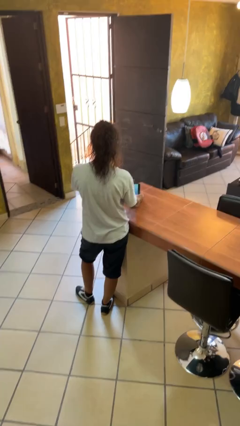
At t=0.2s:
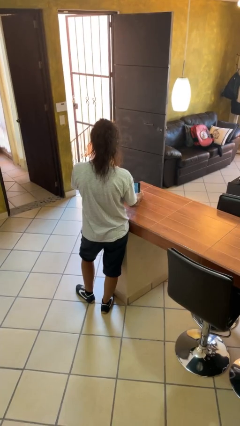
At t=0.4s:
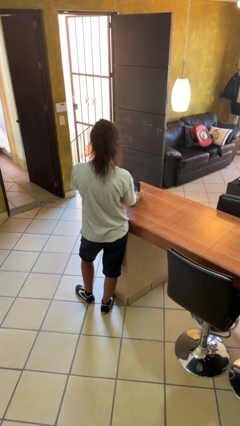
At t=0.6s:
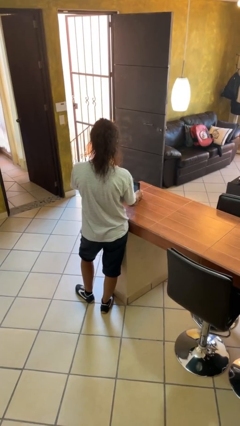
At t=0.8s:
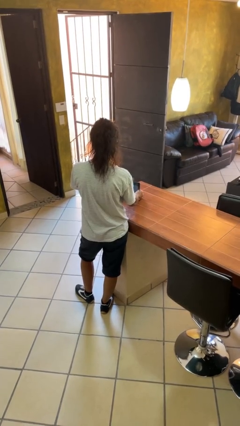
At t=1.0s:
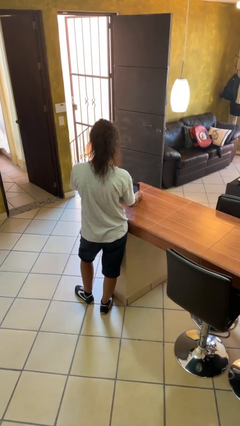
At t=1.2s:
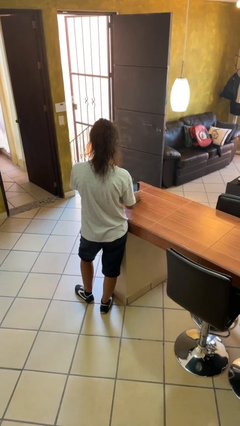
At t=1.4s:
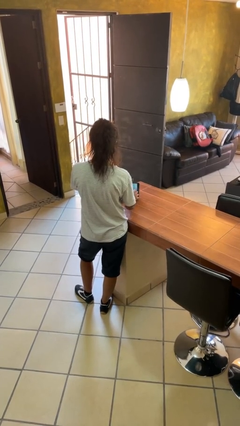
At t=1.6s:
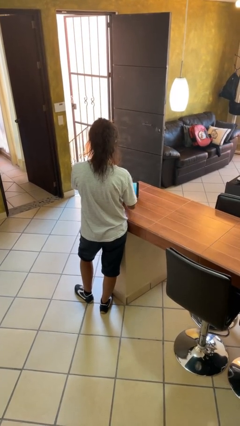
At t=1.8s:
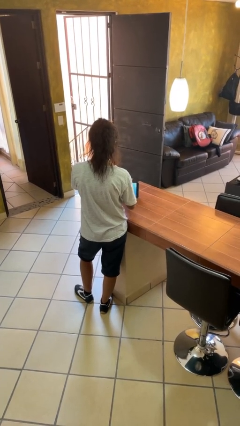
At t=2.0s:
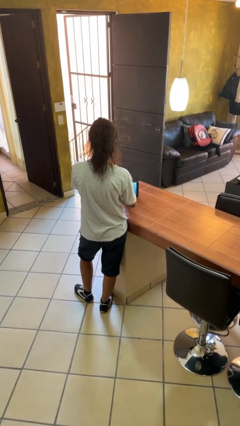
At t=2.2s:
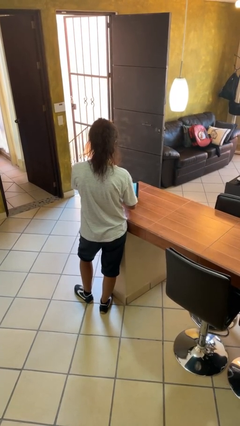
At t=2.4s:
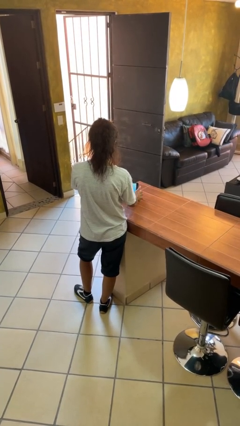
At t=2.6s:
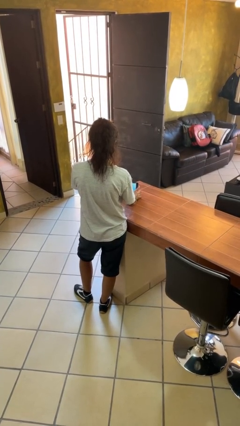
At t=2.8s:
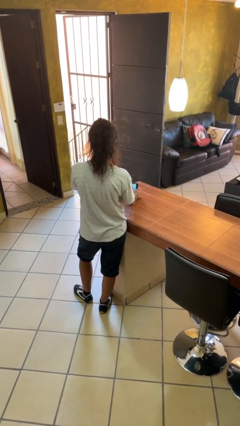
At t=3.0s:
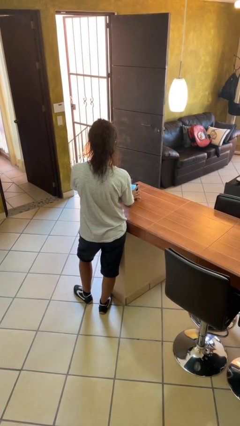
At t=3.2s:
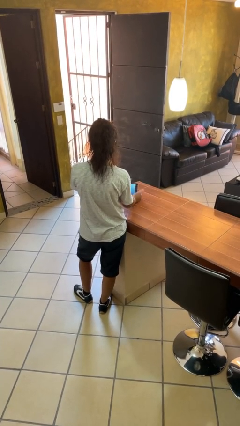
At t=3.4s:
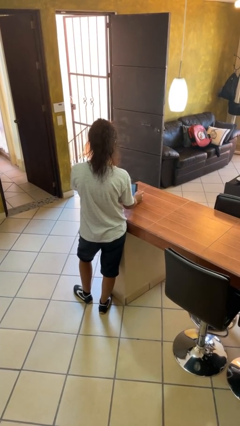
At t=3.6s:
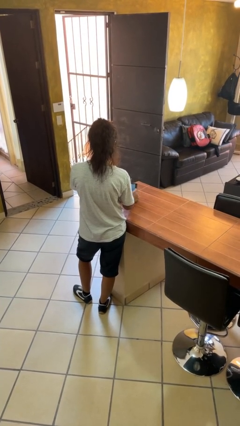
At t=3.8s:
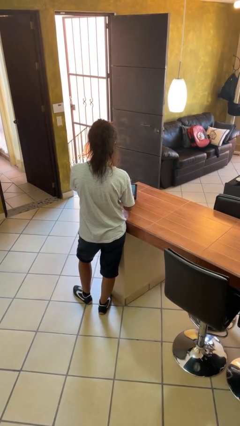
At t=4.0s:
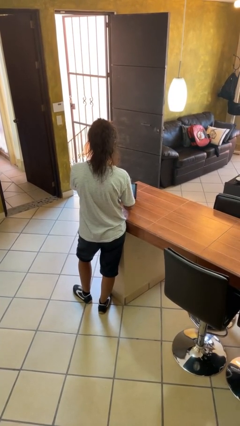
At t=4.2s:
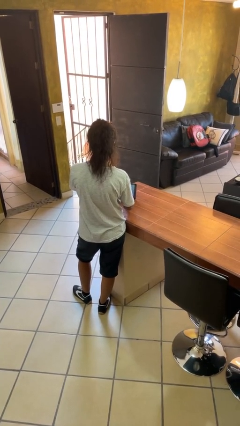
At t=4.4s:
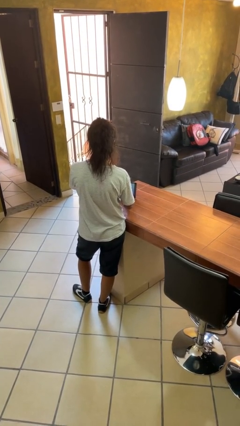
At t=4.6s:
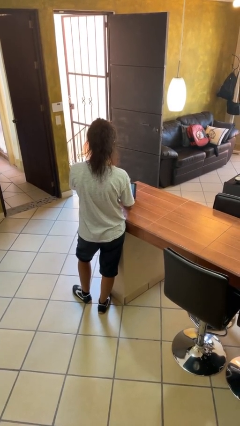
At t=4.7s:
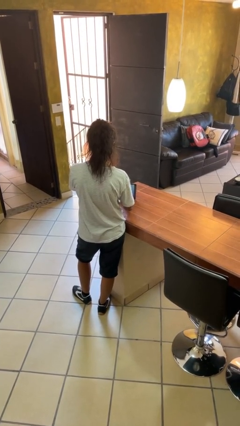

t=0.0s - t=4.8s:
person interacts with tablet

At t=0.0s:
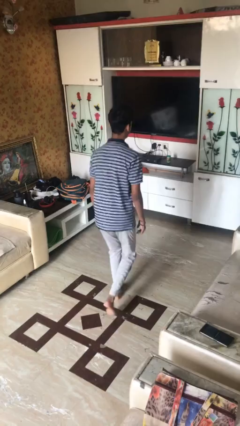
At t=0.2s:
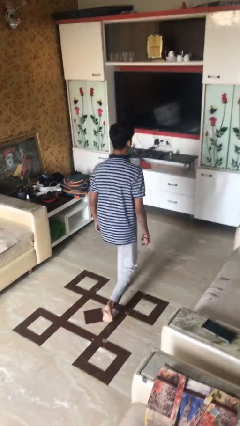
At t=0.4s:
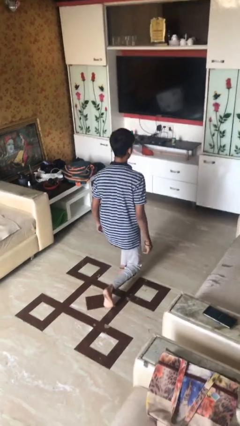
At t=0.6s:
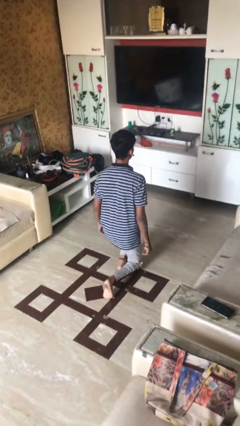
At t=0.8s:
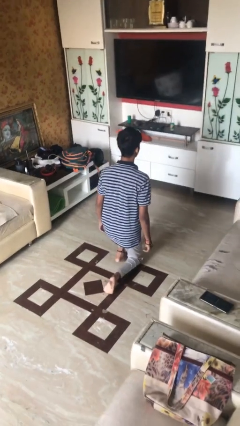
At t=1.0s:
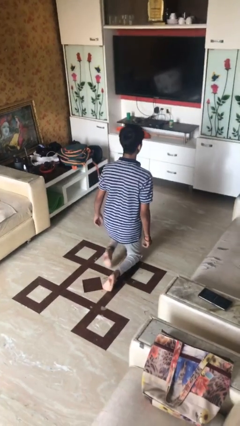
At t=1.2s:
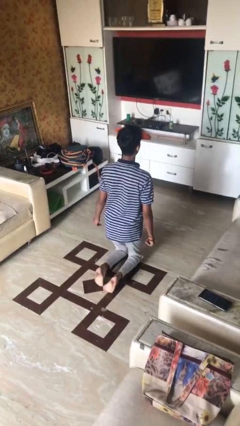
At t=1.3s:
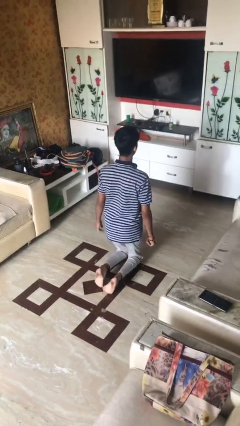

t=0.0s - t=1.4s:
person kneels

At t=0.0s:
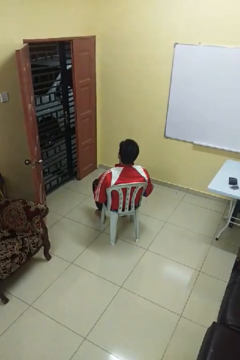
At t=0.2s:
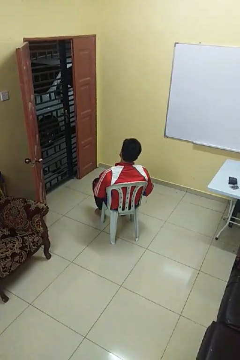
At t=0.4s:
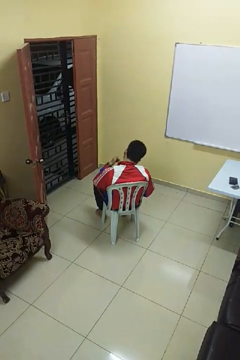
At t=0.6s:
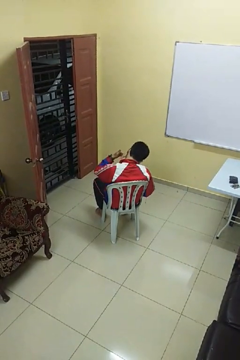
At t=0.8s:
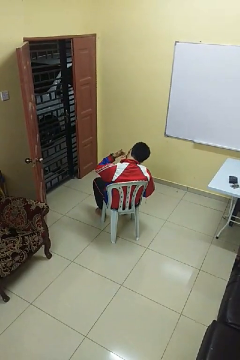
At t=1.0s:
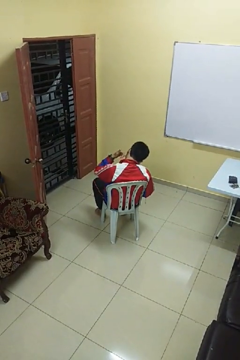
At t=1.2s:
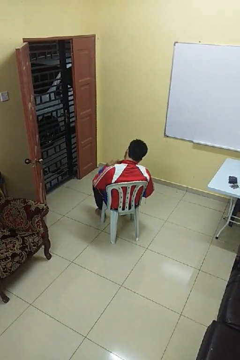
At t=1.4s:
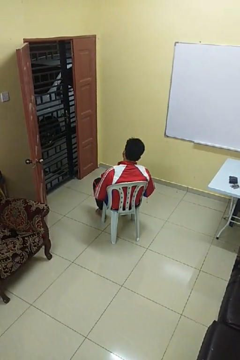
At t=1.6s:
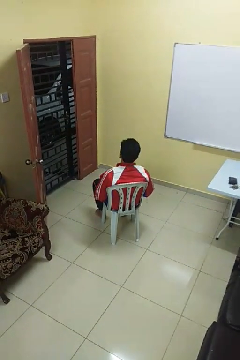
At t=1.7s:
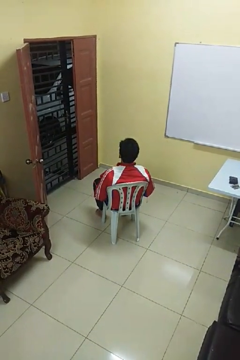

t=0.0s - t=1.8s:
person gestures call me

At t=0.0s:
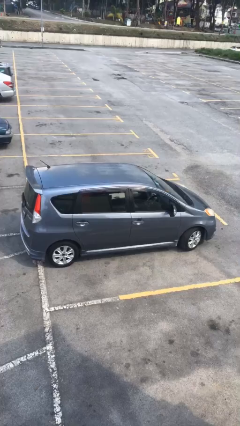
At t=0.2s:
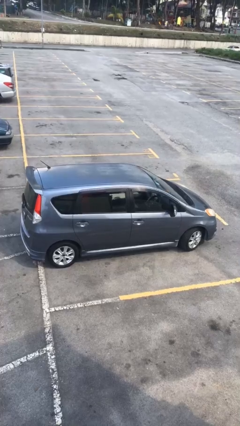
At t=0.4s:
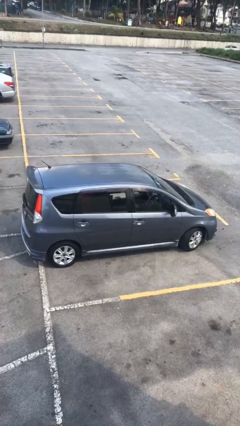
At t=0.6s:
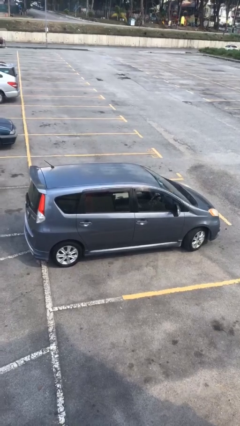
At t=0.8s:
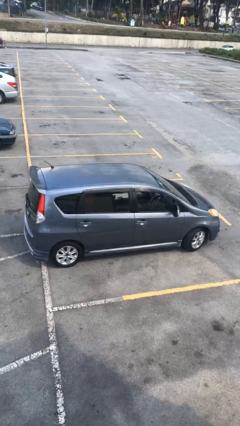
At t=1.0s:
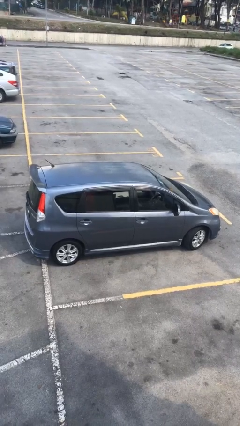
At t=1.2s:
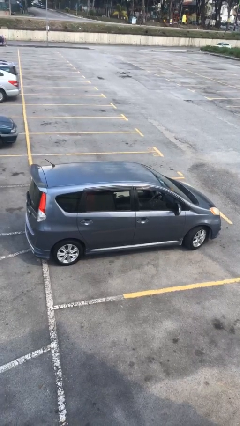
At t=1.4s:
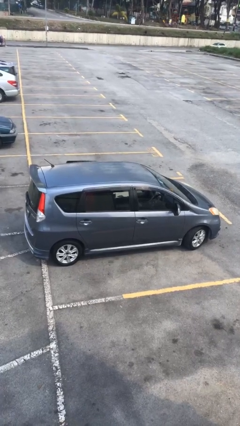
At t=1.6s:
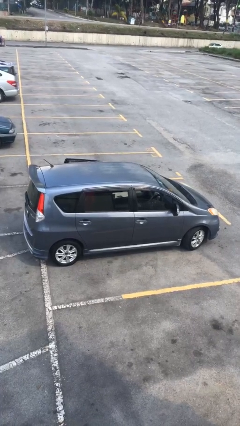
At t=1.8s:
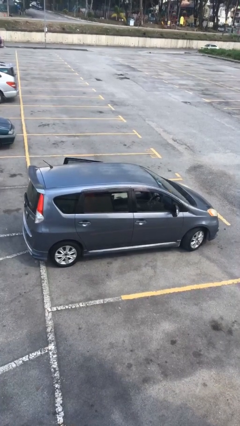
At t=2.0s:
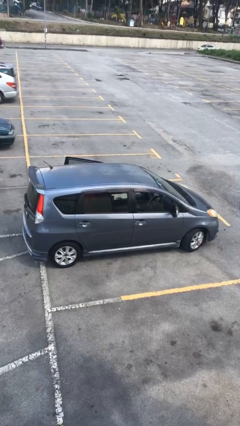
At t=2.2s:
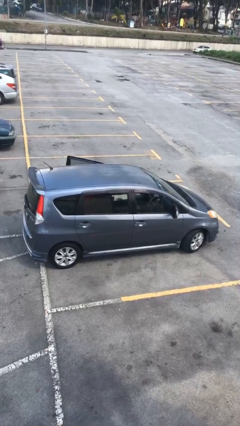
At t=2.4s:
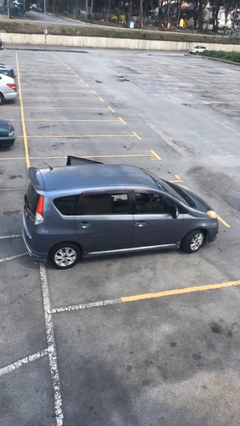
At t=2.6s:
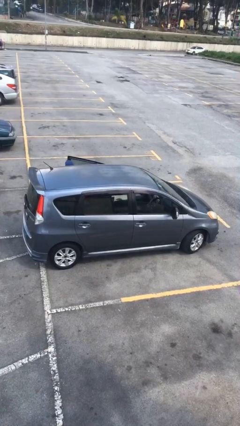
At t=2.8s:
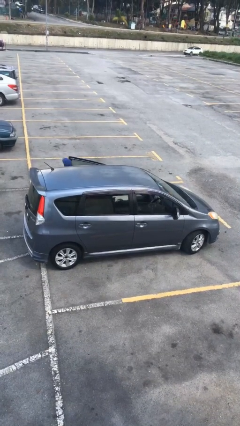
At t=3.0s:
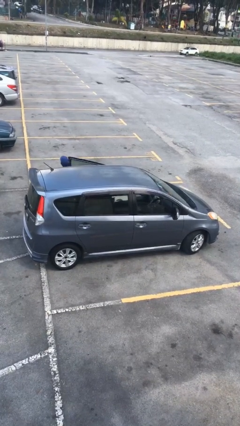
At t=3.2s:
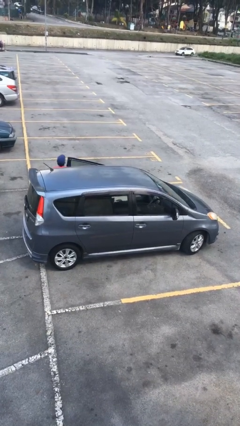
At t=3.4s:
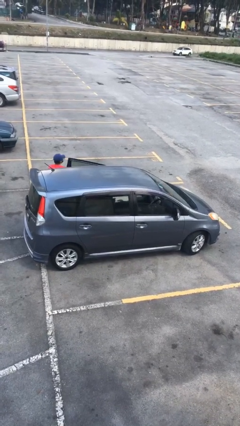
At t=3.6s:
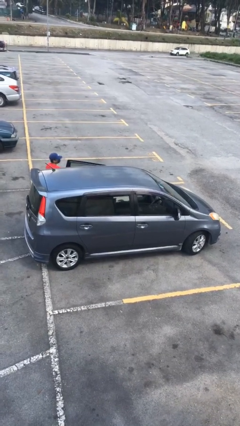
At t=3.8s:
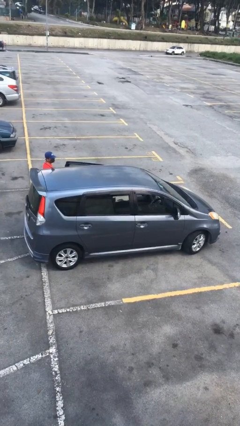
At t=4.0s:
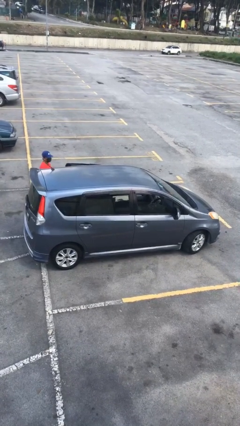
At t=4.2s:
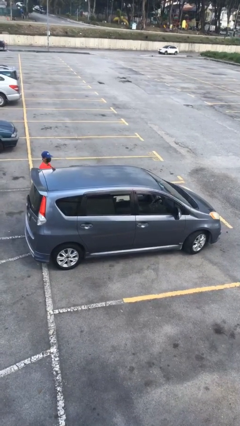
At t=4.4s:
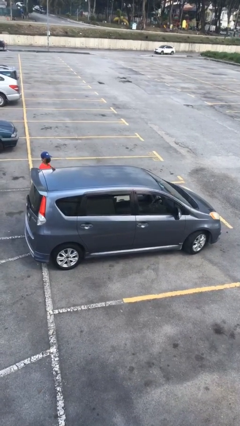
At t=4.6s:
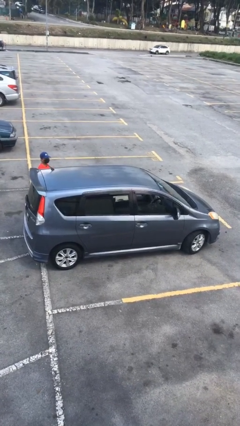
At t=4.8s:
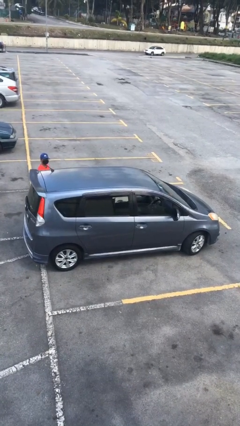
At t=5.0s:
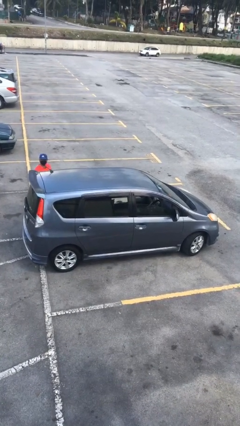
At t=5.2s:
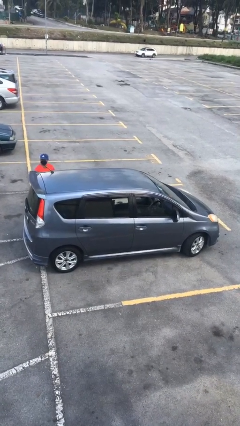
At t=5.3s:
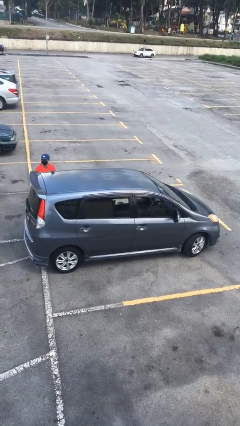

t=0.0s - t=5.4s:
car drops off person

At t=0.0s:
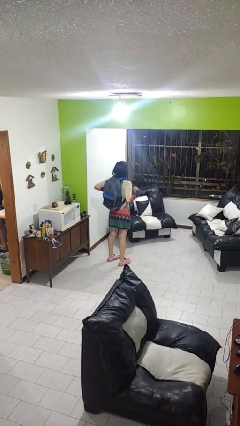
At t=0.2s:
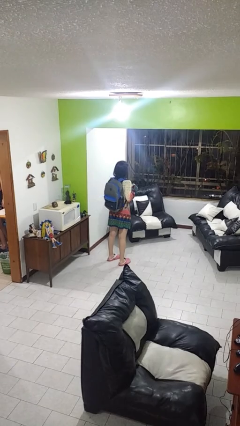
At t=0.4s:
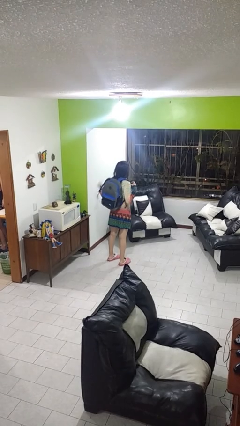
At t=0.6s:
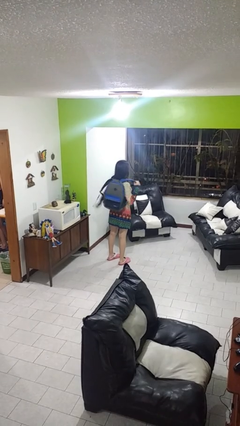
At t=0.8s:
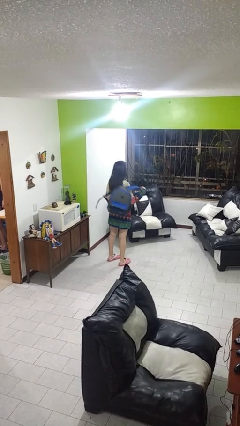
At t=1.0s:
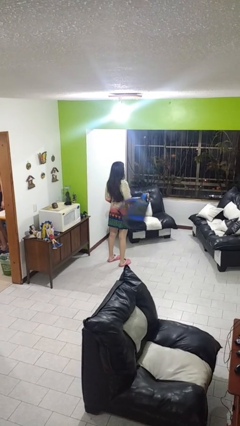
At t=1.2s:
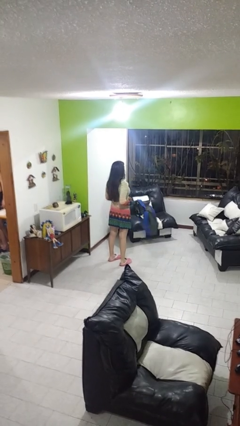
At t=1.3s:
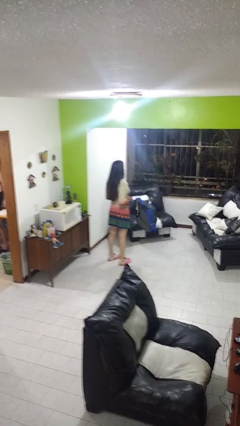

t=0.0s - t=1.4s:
person takes off backpack

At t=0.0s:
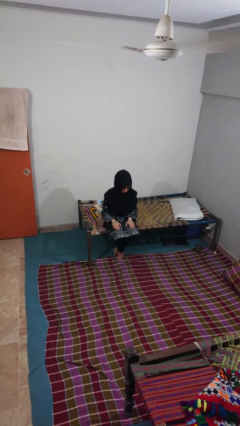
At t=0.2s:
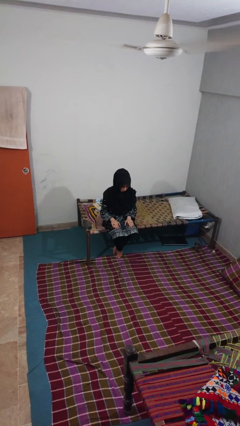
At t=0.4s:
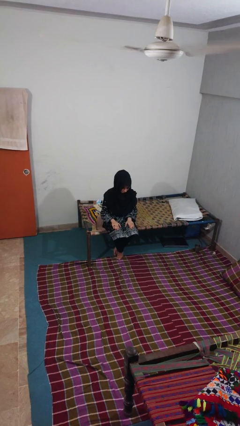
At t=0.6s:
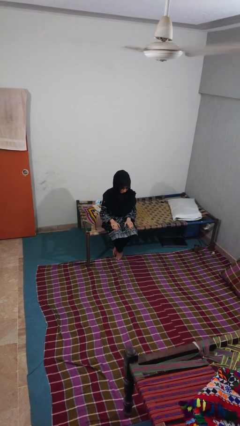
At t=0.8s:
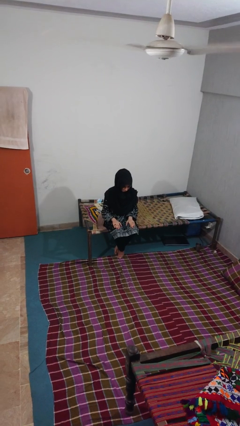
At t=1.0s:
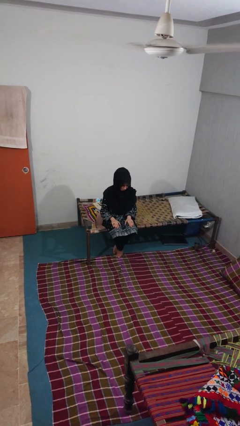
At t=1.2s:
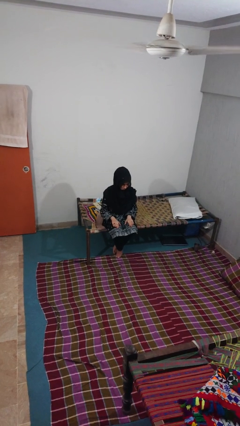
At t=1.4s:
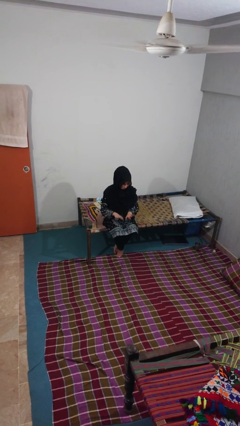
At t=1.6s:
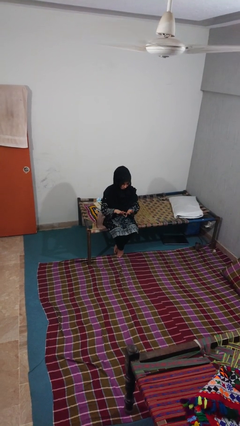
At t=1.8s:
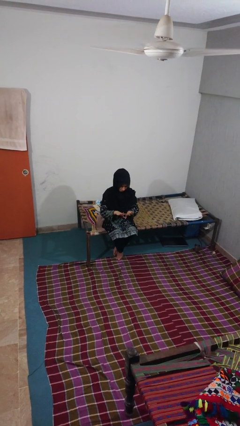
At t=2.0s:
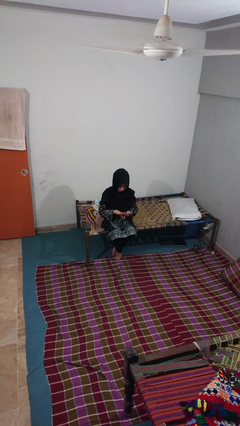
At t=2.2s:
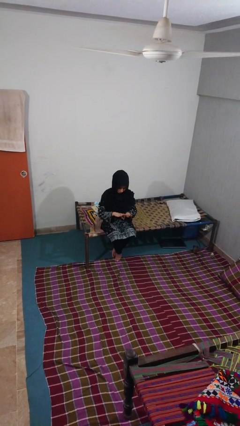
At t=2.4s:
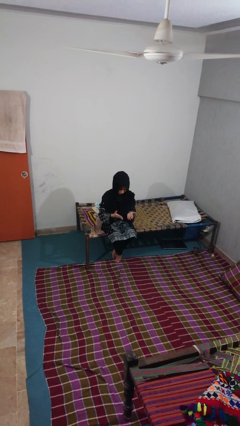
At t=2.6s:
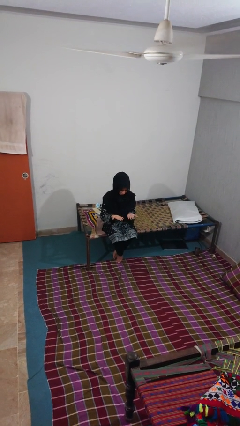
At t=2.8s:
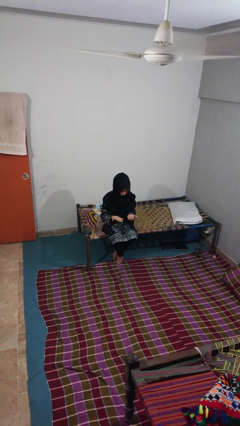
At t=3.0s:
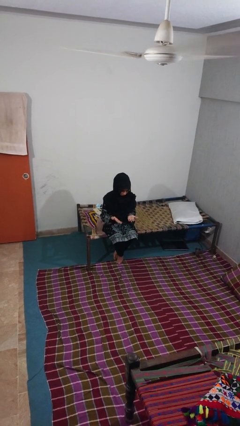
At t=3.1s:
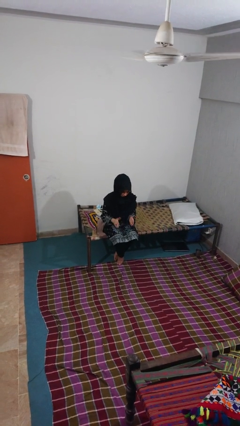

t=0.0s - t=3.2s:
person looks at hands in lap
